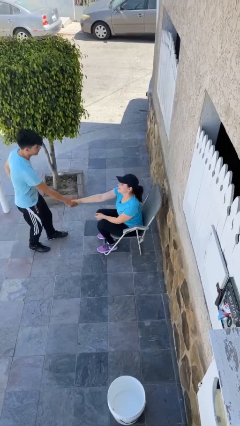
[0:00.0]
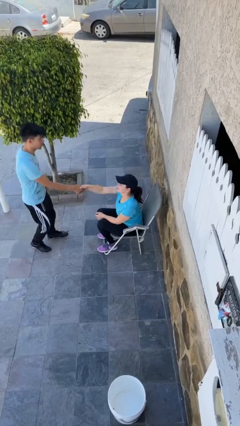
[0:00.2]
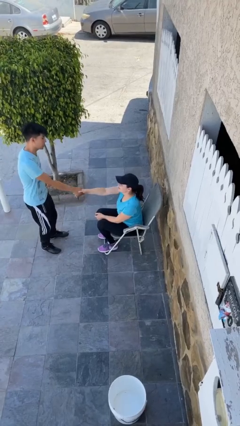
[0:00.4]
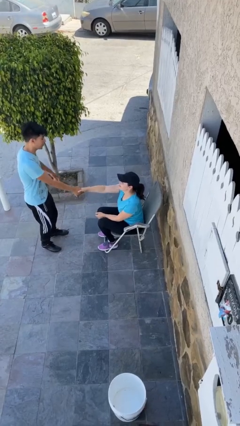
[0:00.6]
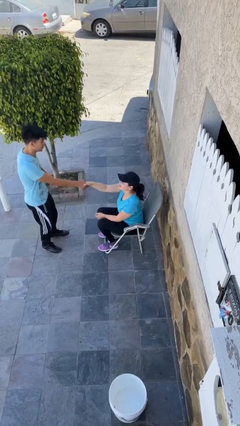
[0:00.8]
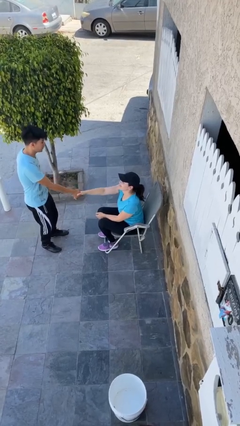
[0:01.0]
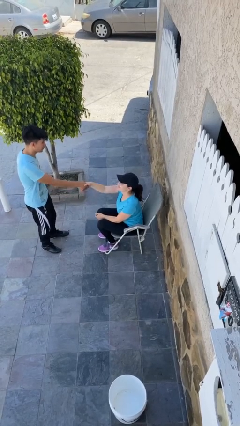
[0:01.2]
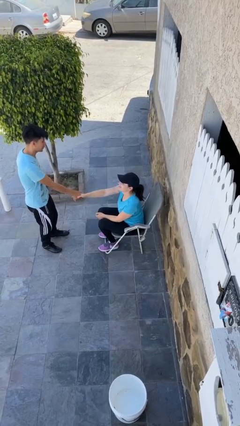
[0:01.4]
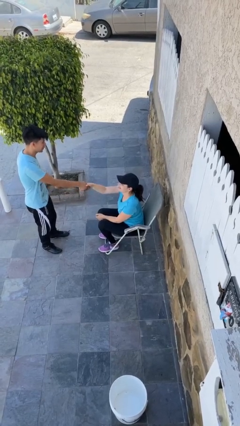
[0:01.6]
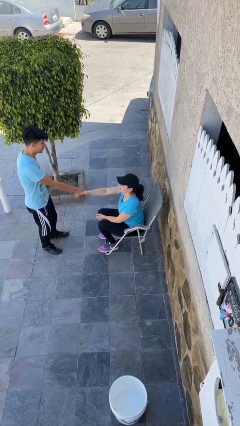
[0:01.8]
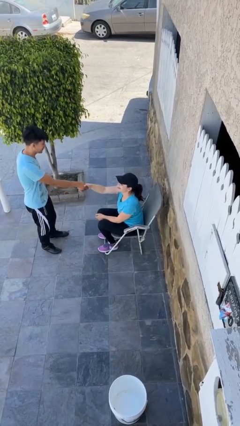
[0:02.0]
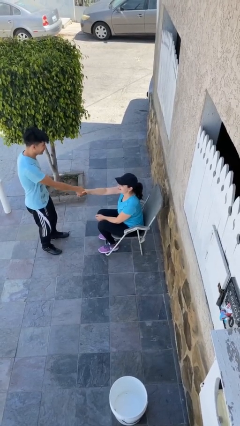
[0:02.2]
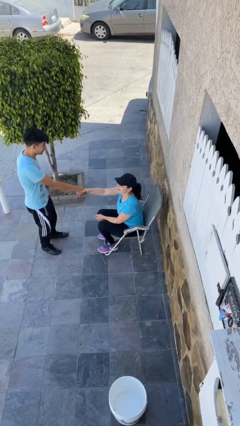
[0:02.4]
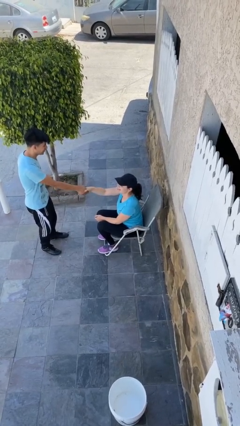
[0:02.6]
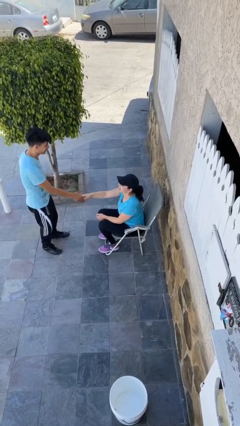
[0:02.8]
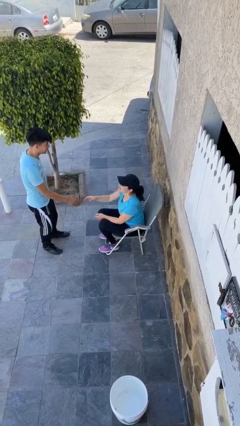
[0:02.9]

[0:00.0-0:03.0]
person shakes hand

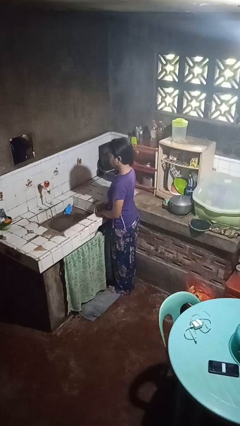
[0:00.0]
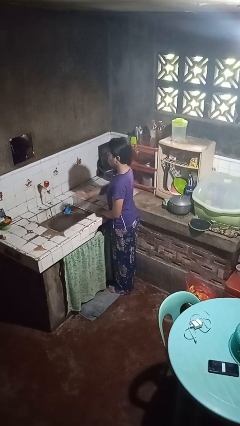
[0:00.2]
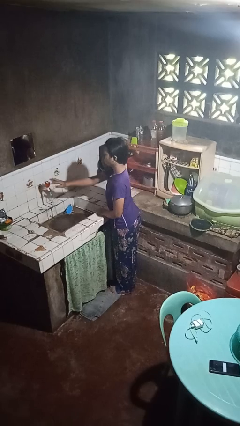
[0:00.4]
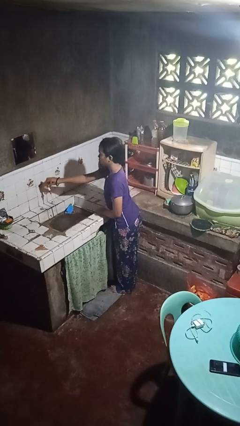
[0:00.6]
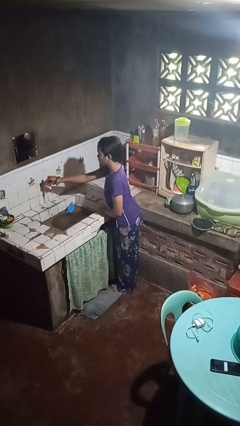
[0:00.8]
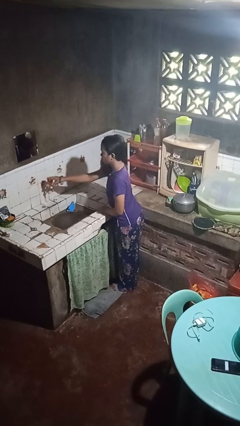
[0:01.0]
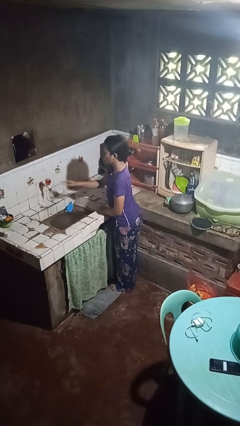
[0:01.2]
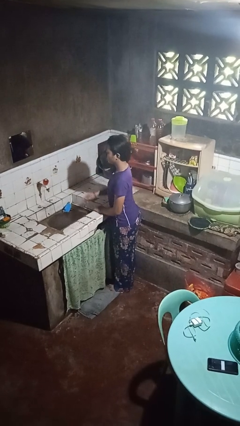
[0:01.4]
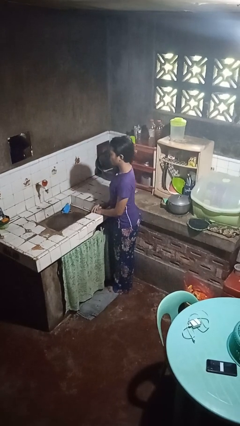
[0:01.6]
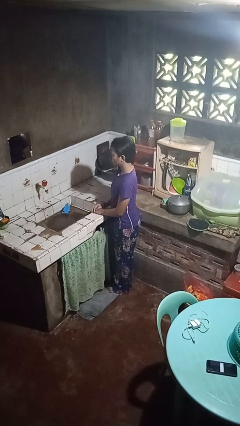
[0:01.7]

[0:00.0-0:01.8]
person turns off faucet

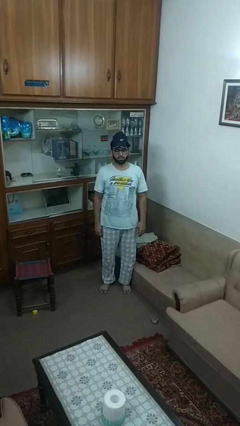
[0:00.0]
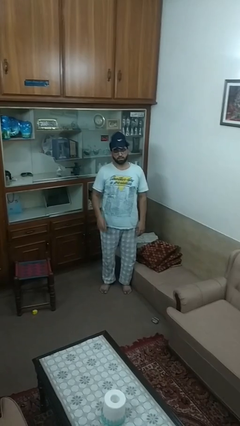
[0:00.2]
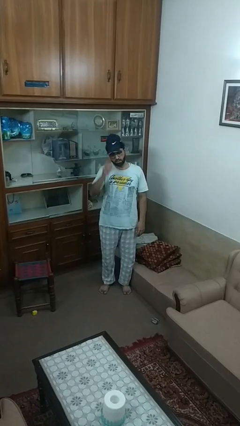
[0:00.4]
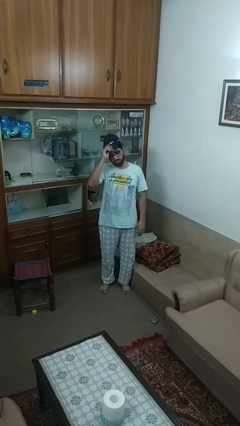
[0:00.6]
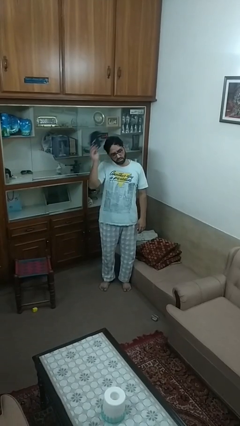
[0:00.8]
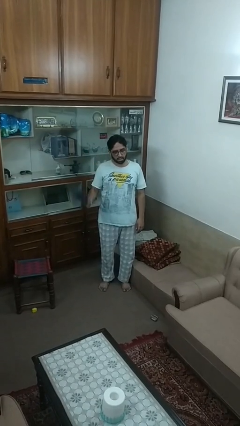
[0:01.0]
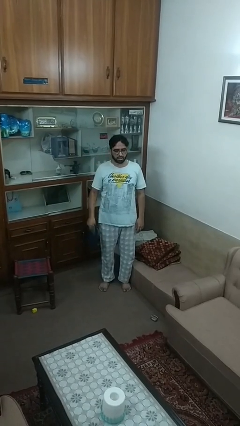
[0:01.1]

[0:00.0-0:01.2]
person takes off hat

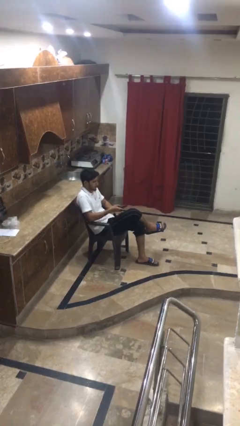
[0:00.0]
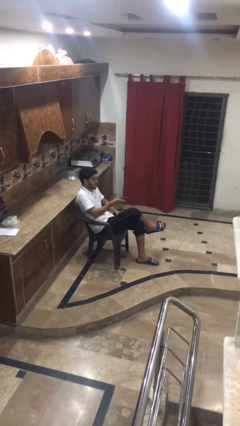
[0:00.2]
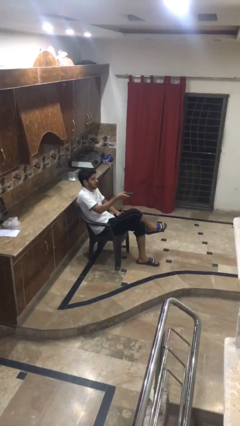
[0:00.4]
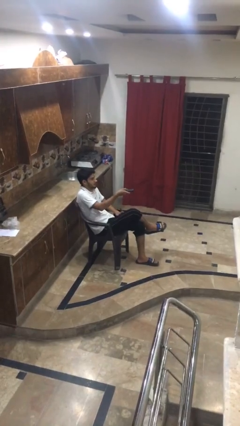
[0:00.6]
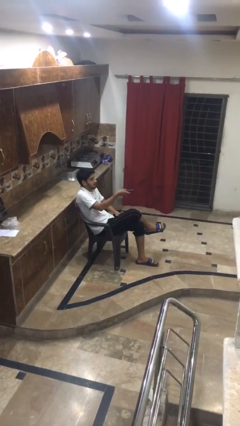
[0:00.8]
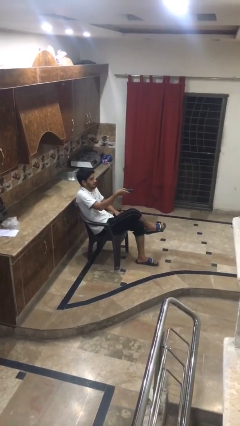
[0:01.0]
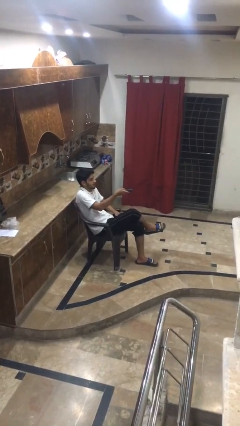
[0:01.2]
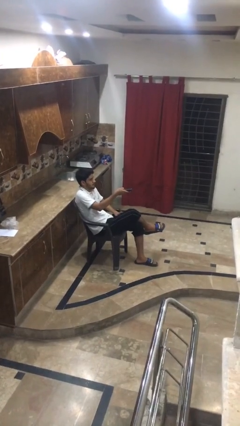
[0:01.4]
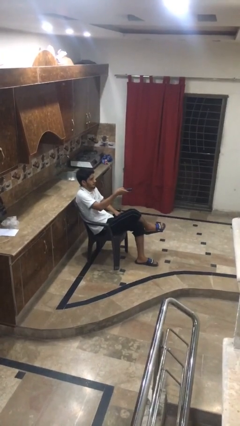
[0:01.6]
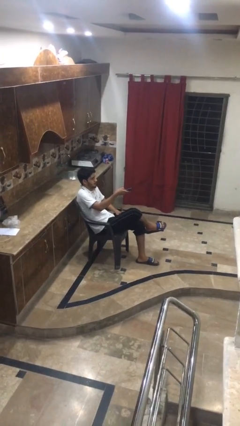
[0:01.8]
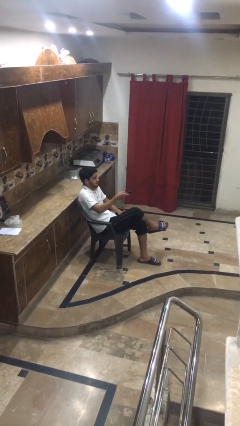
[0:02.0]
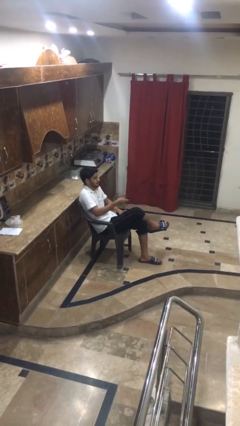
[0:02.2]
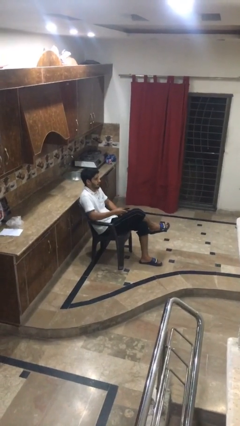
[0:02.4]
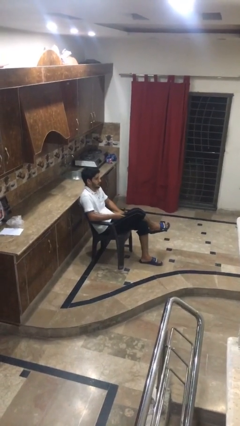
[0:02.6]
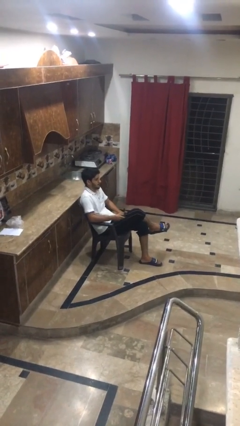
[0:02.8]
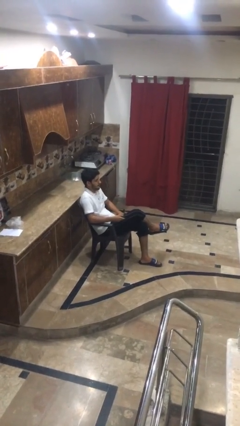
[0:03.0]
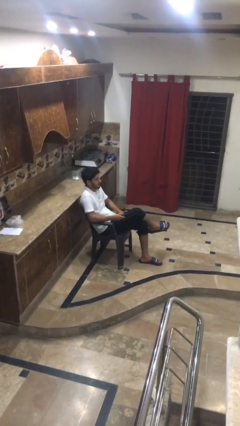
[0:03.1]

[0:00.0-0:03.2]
person uses television remote

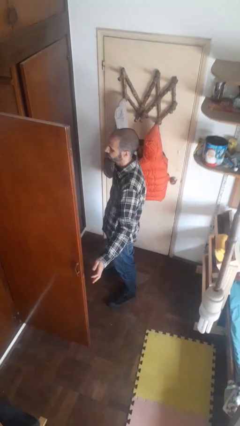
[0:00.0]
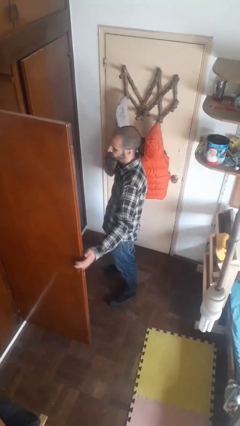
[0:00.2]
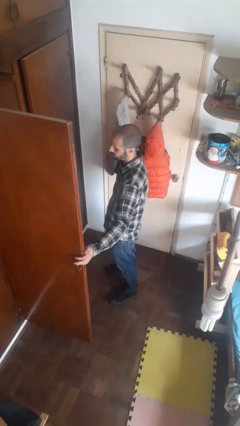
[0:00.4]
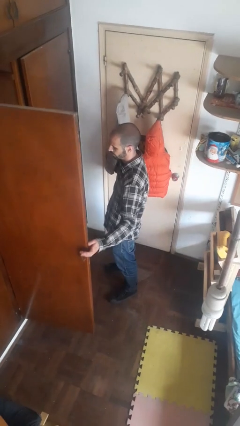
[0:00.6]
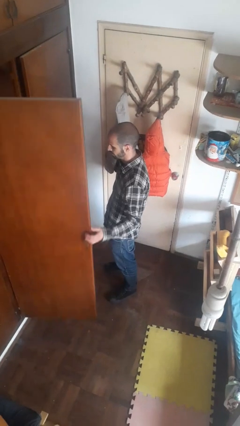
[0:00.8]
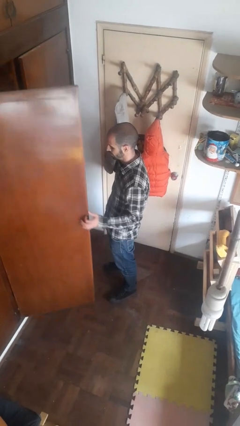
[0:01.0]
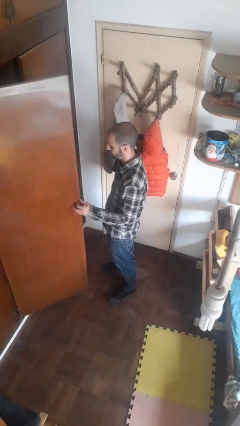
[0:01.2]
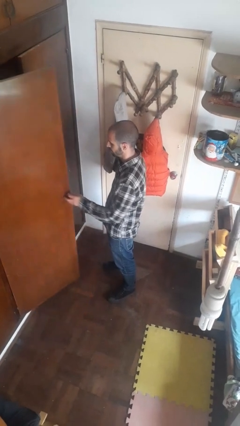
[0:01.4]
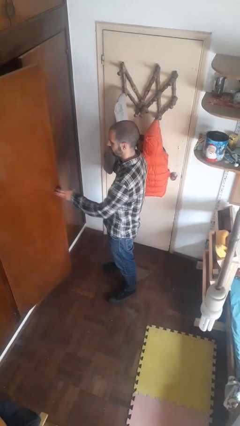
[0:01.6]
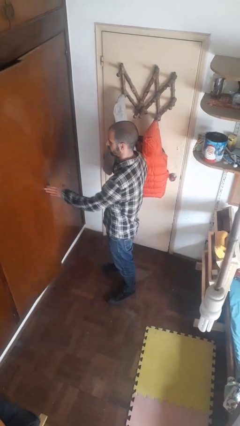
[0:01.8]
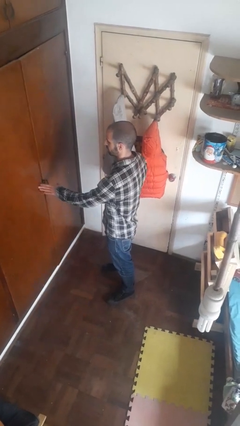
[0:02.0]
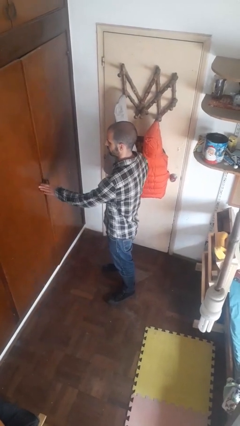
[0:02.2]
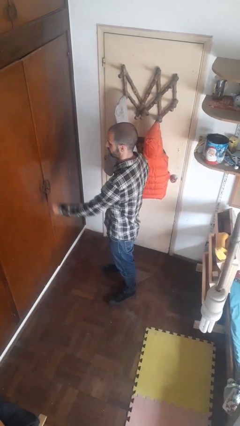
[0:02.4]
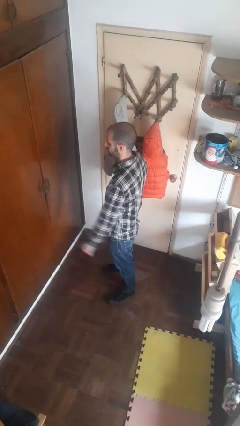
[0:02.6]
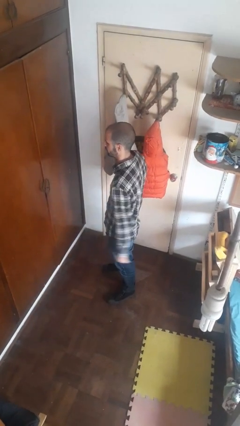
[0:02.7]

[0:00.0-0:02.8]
person closes closet door

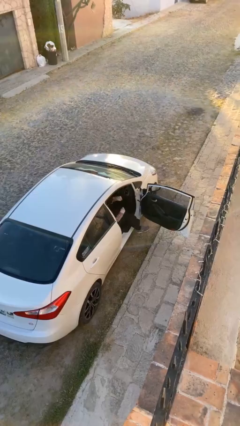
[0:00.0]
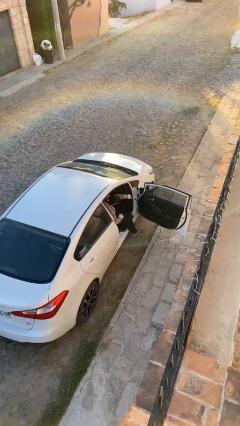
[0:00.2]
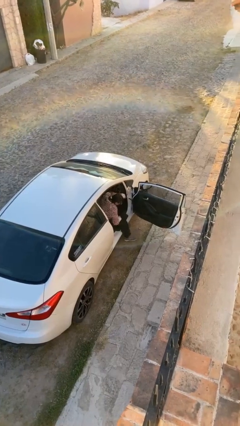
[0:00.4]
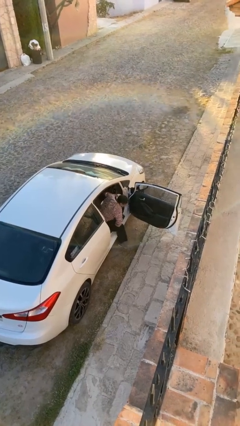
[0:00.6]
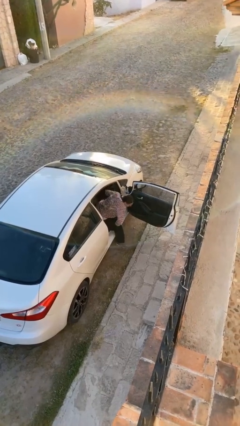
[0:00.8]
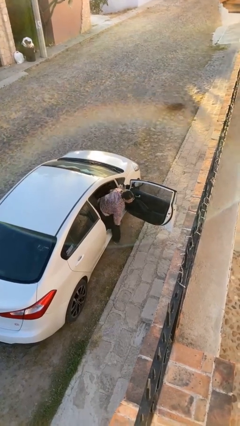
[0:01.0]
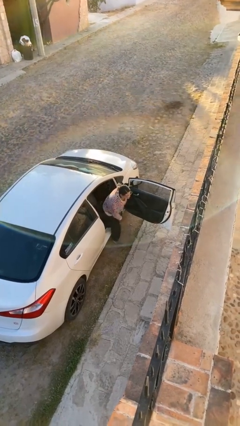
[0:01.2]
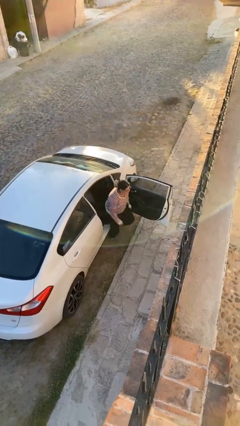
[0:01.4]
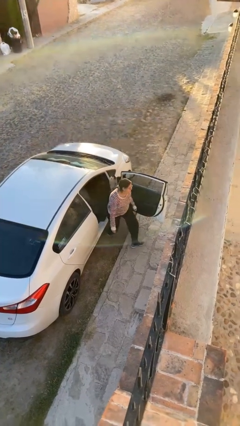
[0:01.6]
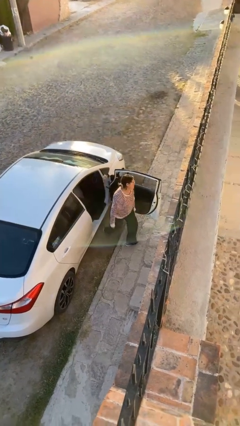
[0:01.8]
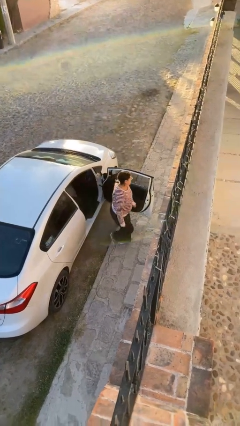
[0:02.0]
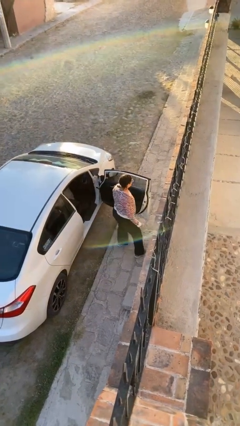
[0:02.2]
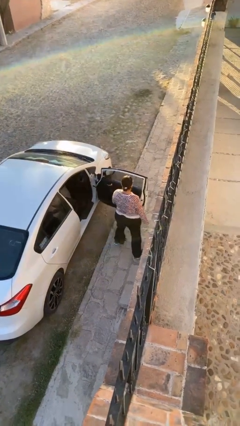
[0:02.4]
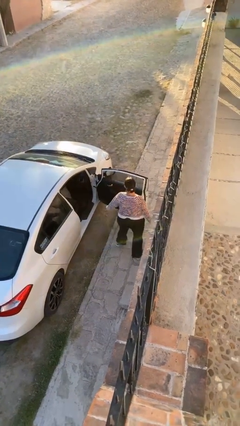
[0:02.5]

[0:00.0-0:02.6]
person exits car

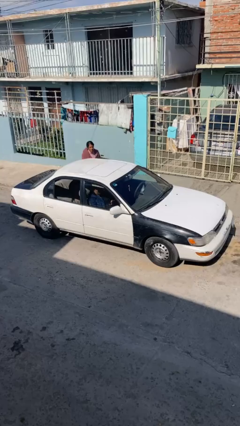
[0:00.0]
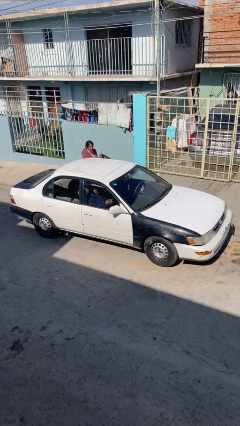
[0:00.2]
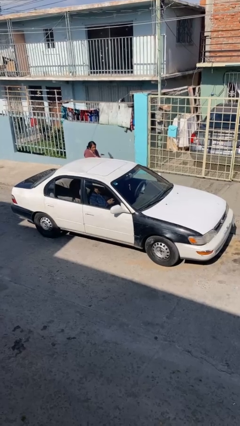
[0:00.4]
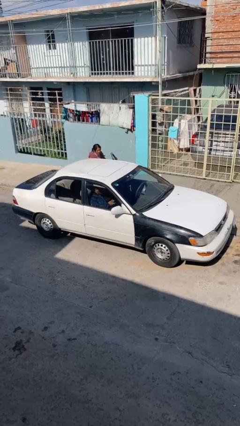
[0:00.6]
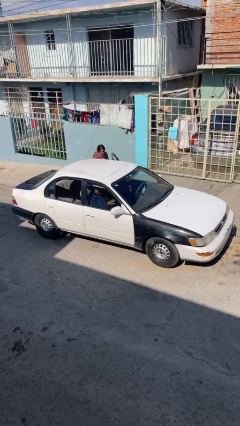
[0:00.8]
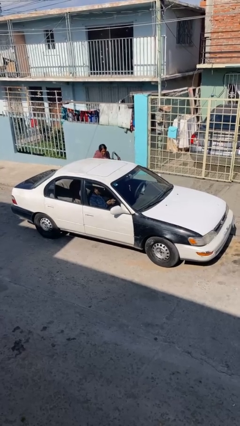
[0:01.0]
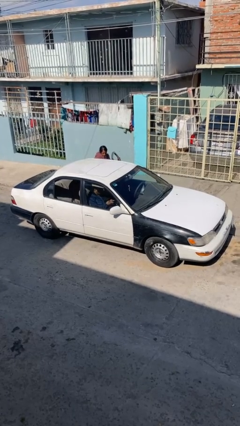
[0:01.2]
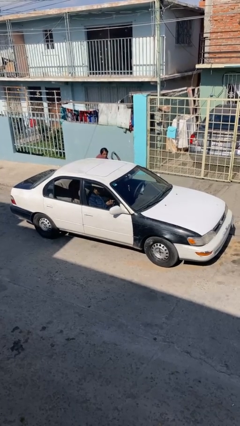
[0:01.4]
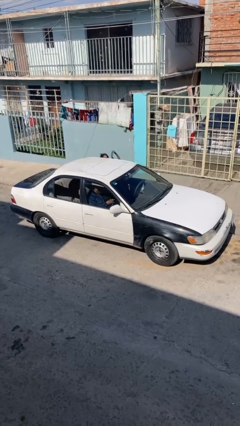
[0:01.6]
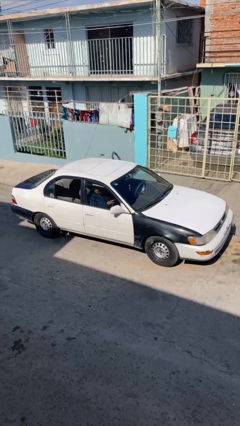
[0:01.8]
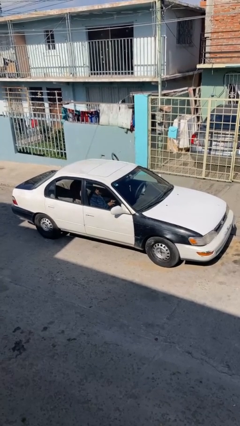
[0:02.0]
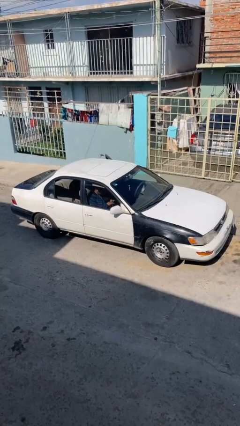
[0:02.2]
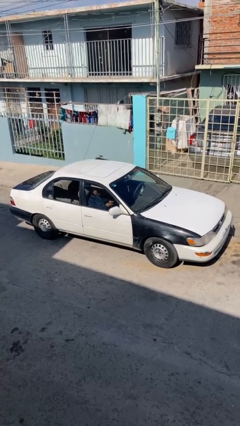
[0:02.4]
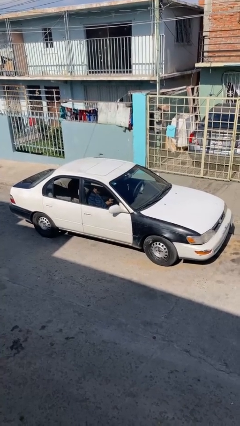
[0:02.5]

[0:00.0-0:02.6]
car picks up person
